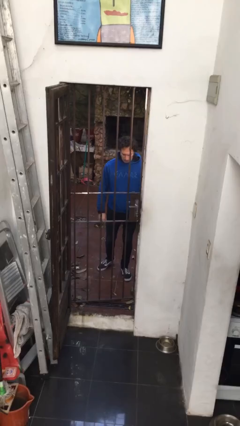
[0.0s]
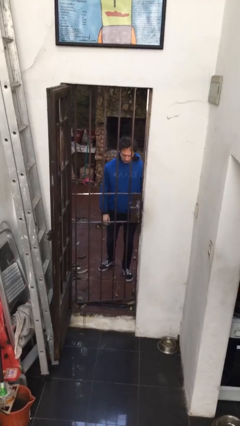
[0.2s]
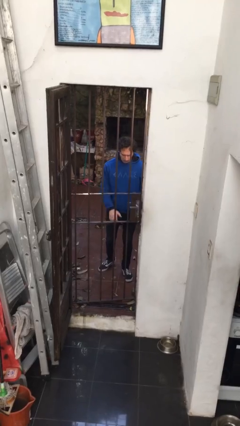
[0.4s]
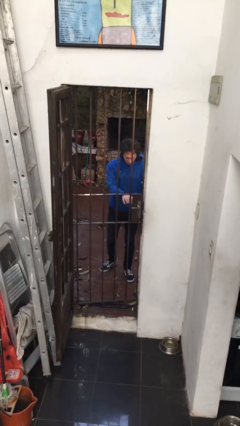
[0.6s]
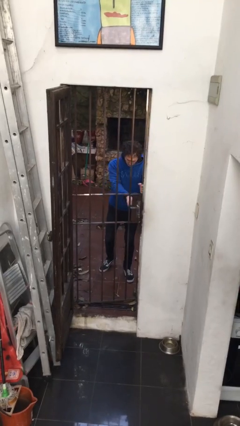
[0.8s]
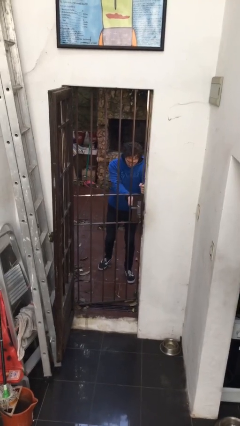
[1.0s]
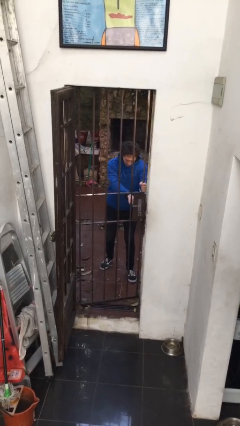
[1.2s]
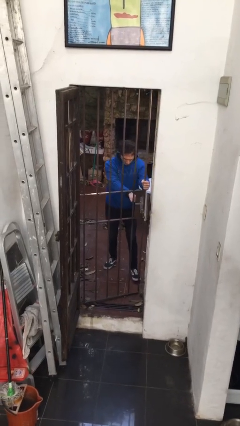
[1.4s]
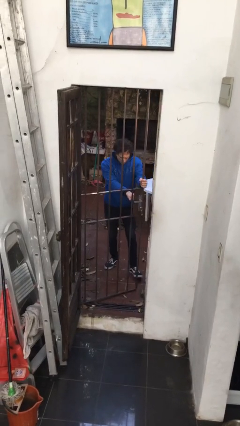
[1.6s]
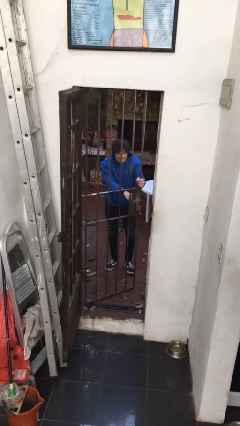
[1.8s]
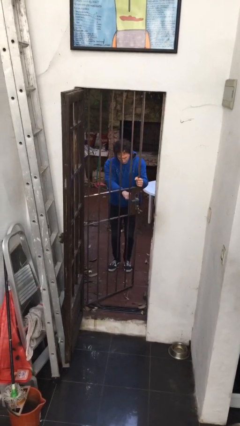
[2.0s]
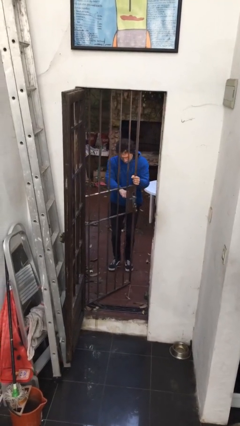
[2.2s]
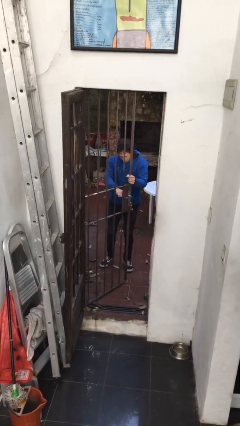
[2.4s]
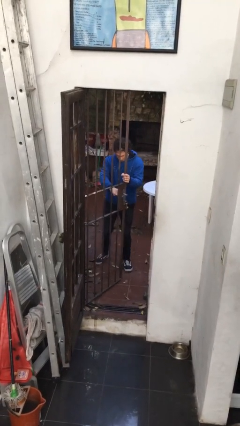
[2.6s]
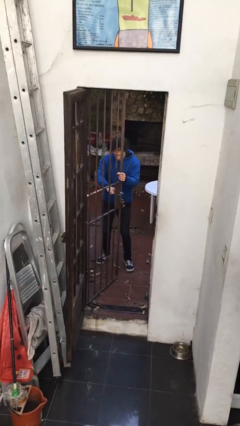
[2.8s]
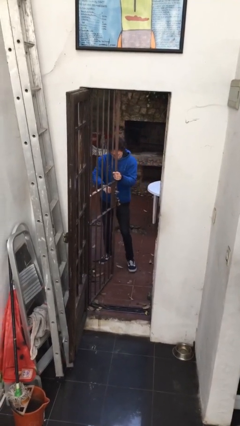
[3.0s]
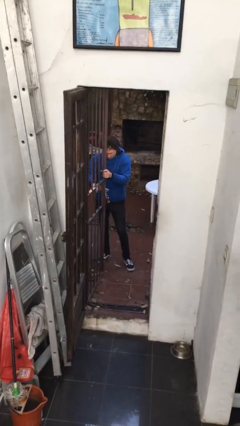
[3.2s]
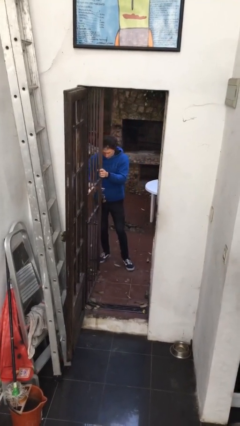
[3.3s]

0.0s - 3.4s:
person opens gate

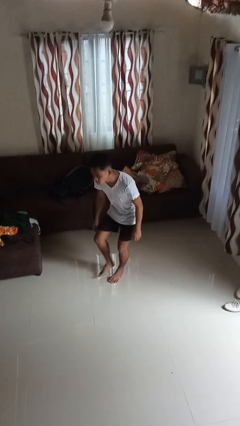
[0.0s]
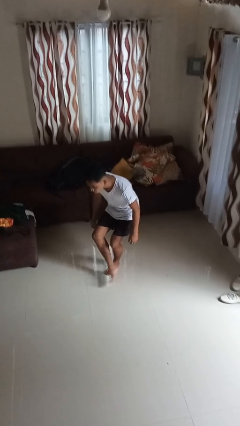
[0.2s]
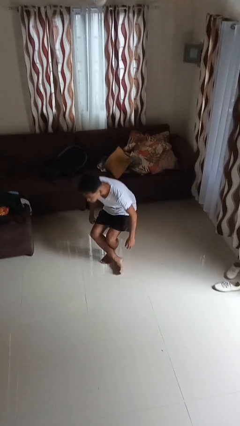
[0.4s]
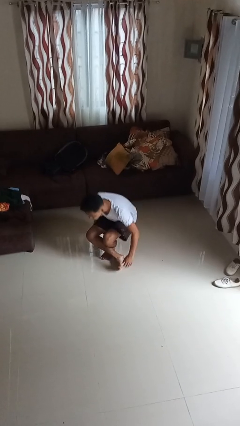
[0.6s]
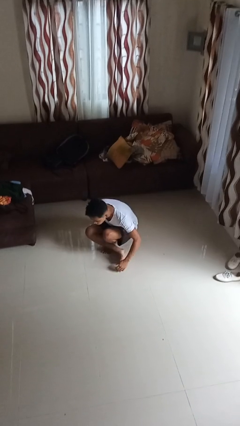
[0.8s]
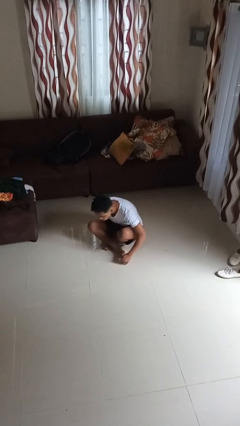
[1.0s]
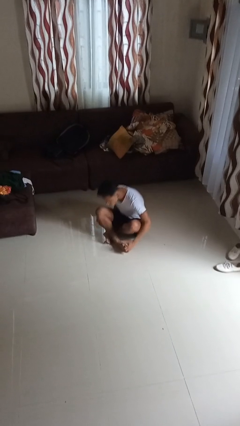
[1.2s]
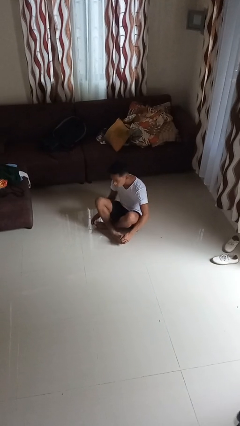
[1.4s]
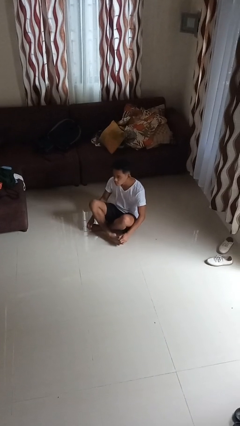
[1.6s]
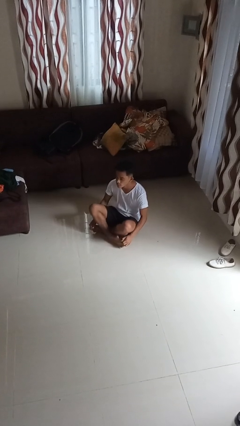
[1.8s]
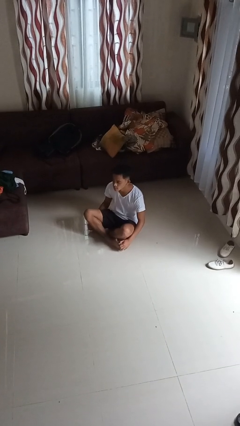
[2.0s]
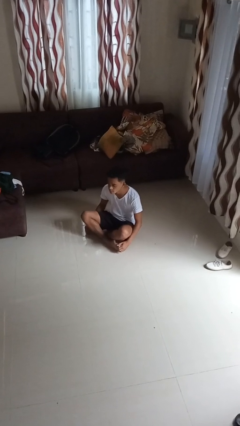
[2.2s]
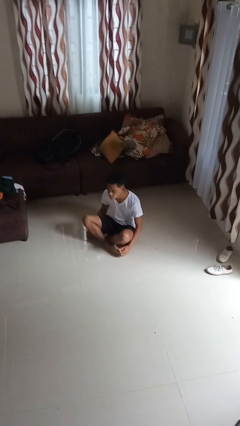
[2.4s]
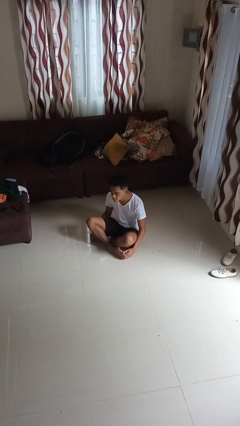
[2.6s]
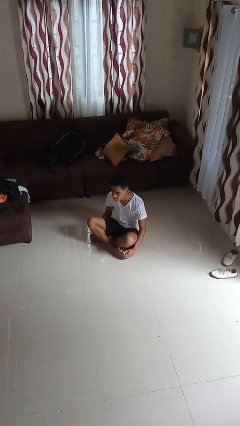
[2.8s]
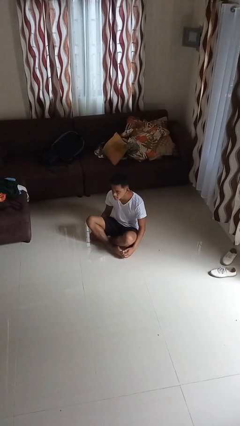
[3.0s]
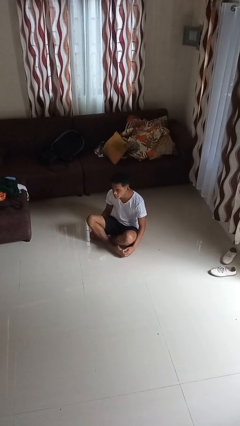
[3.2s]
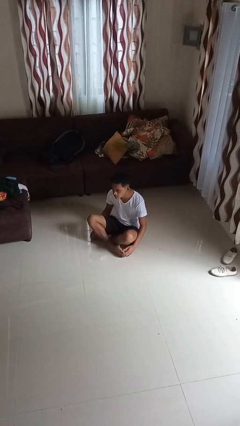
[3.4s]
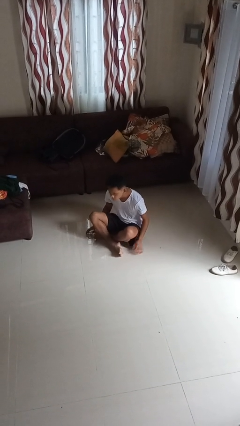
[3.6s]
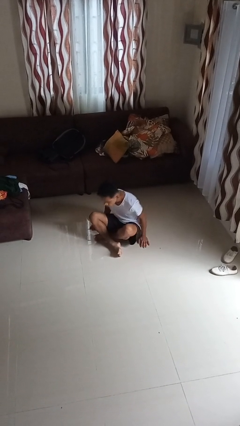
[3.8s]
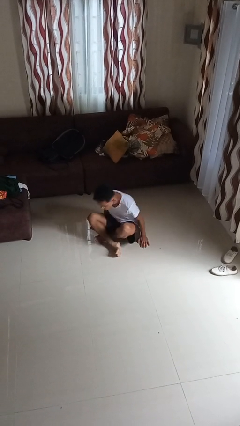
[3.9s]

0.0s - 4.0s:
person sits crisscross

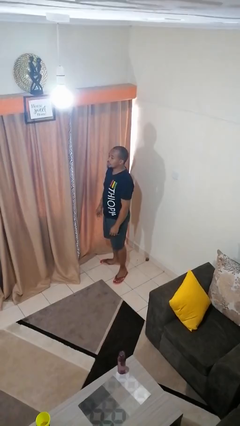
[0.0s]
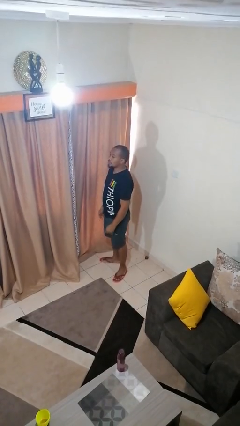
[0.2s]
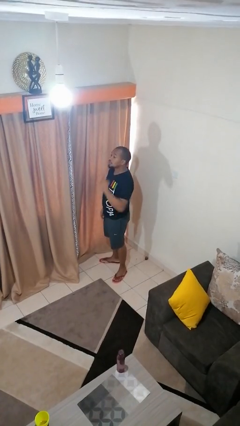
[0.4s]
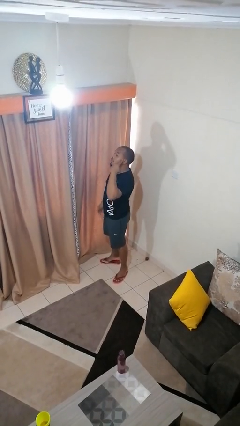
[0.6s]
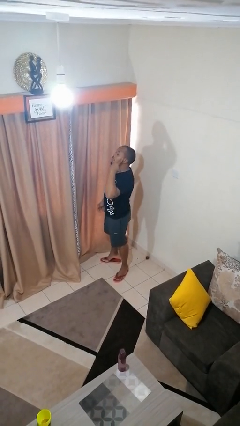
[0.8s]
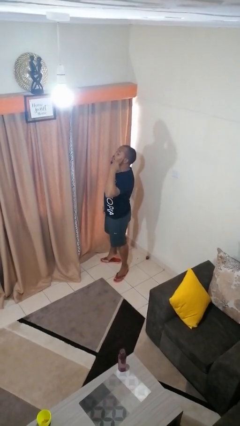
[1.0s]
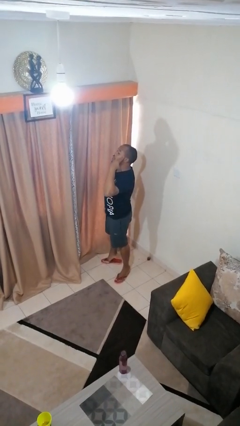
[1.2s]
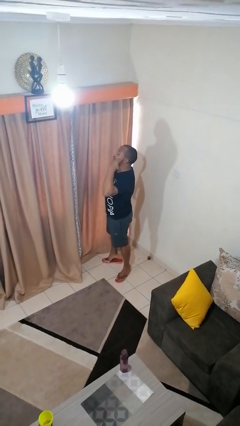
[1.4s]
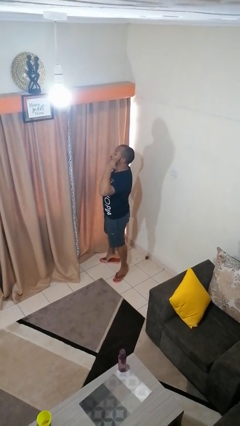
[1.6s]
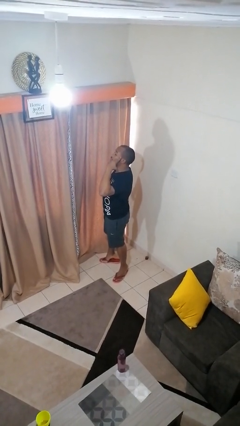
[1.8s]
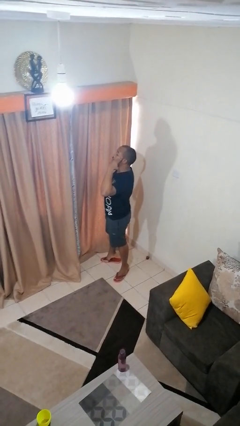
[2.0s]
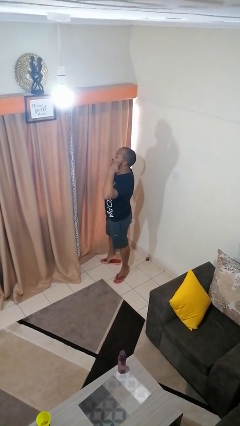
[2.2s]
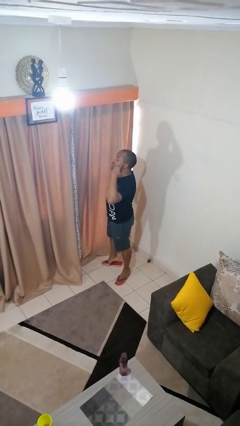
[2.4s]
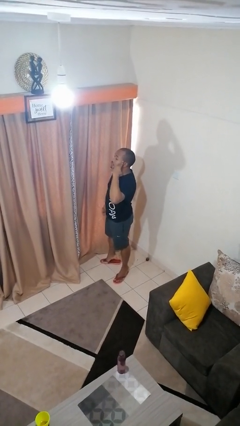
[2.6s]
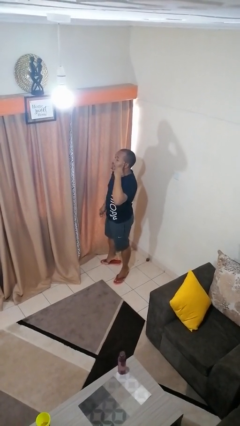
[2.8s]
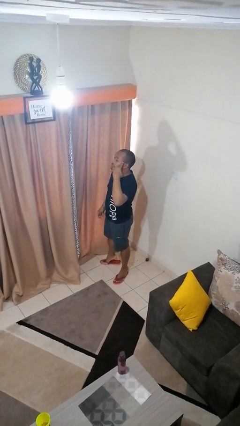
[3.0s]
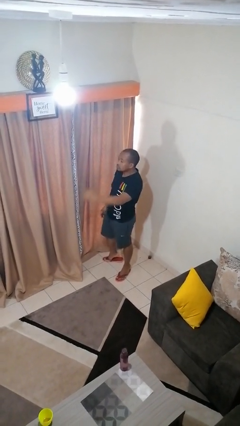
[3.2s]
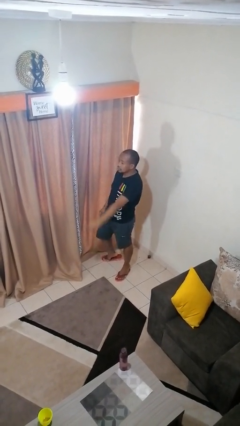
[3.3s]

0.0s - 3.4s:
person gestures call me

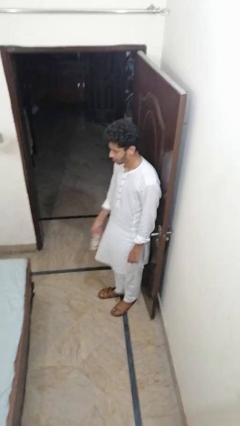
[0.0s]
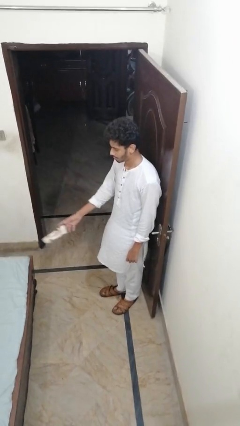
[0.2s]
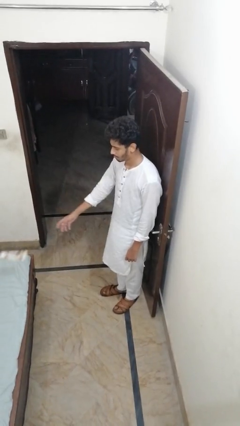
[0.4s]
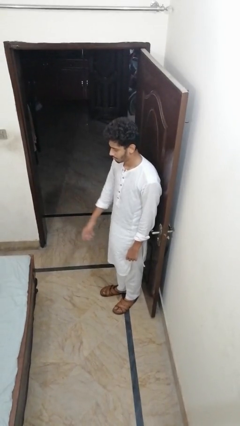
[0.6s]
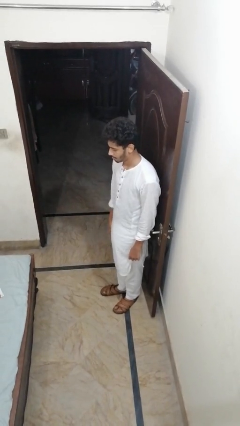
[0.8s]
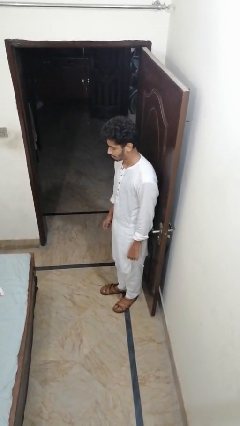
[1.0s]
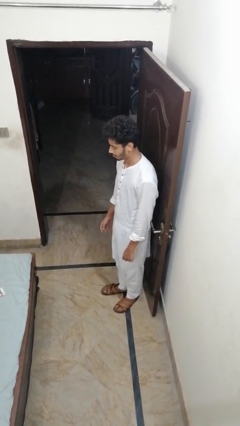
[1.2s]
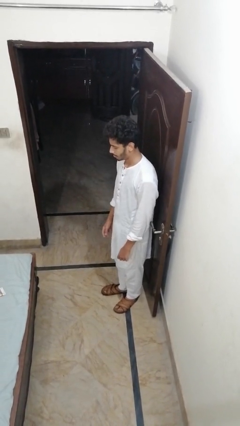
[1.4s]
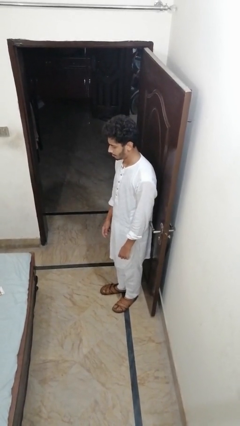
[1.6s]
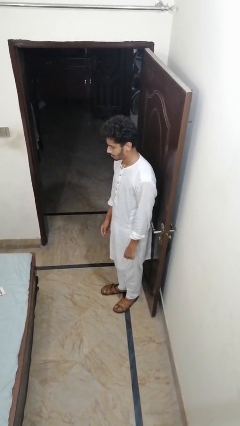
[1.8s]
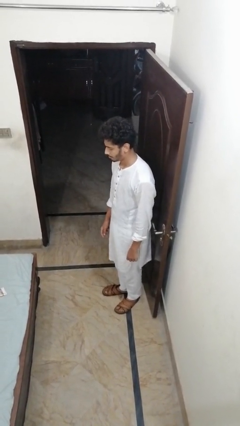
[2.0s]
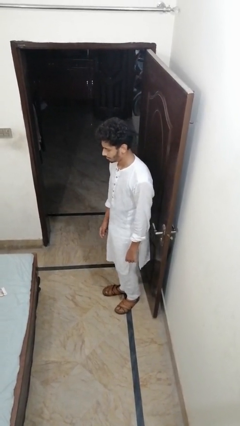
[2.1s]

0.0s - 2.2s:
person throws object on bed

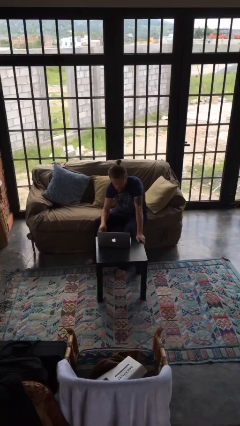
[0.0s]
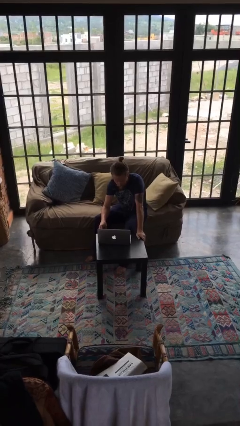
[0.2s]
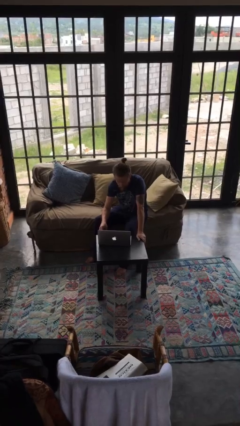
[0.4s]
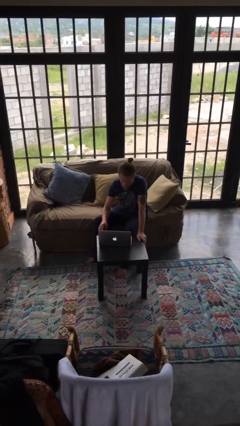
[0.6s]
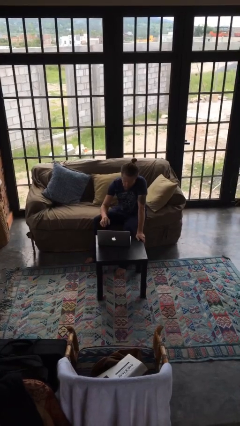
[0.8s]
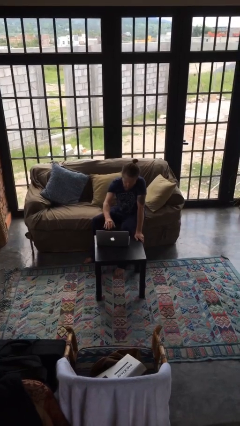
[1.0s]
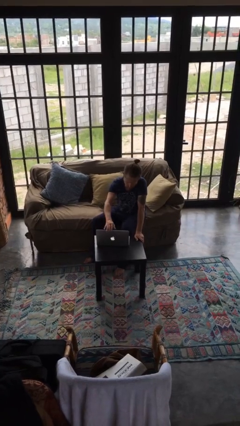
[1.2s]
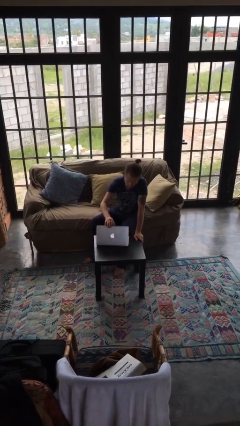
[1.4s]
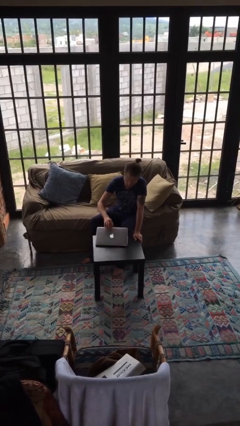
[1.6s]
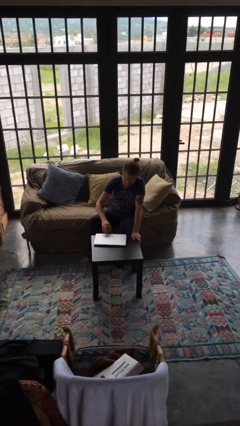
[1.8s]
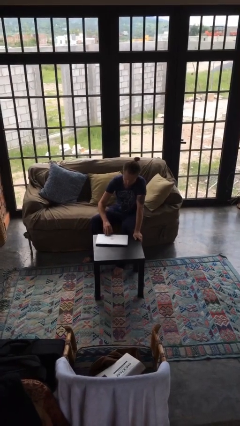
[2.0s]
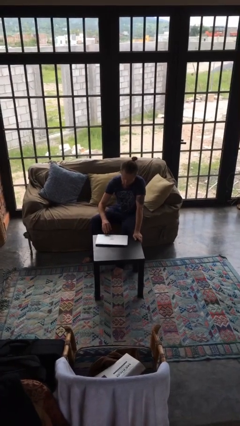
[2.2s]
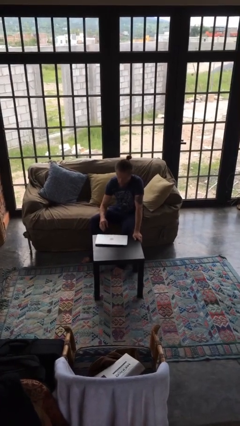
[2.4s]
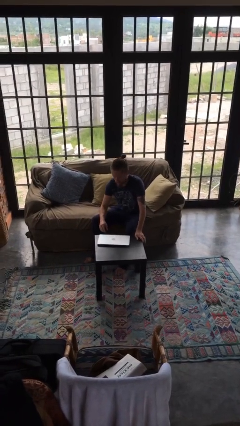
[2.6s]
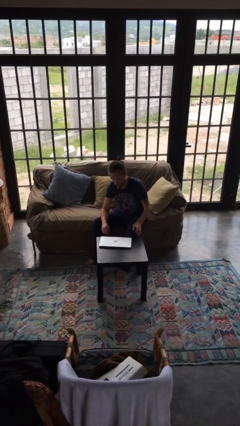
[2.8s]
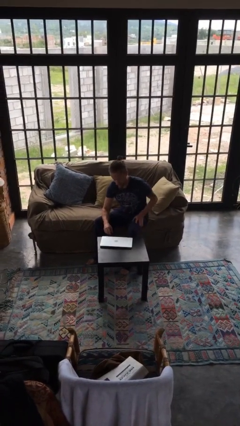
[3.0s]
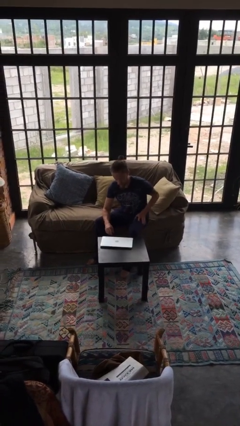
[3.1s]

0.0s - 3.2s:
person closes laptop

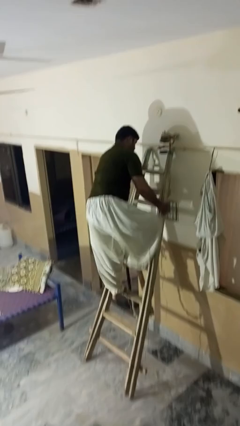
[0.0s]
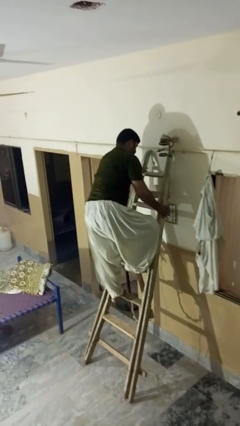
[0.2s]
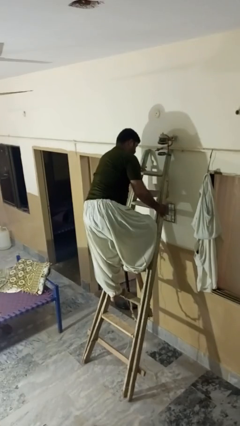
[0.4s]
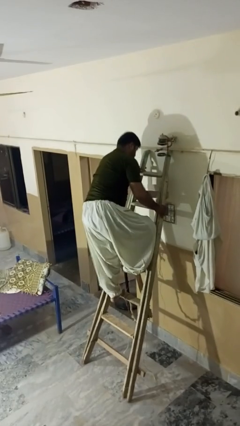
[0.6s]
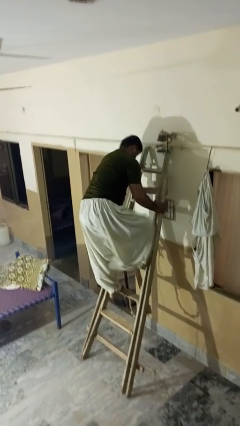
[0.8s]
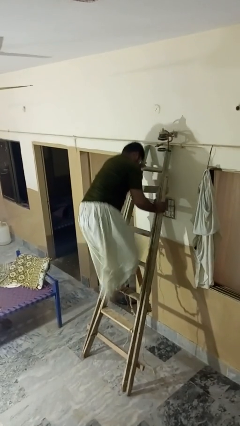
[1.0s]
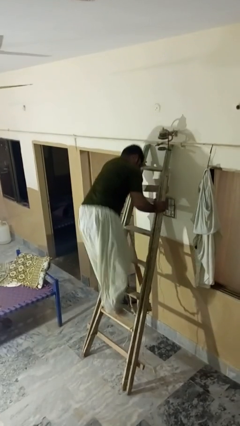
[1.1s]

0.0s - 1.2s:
person climbs down ladder

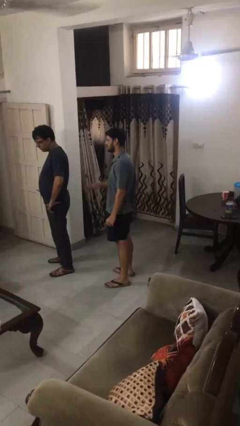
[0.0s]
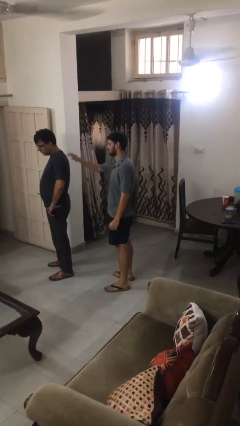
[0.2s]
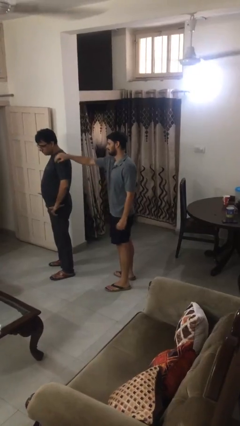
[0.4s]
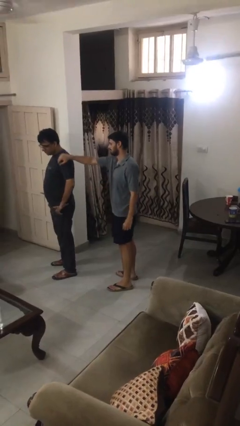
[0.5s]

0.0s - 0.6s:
person grabs person by shoulder
